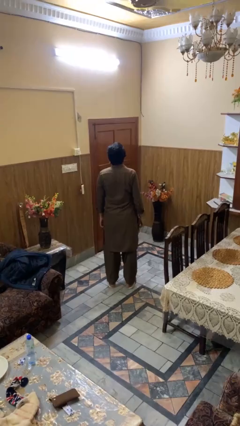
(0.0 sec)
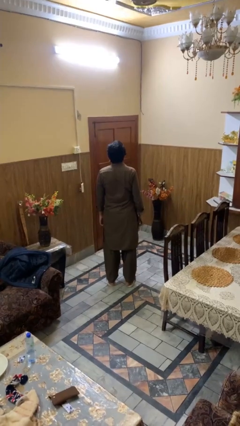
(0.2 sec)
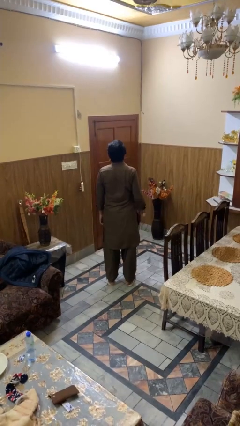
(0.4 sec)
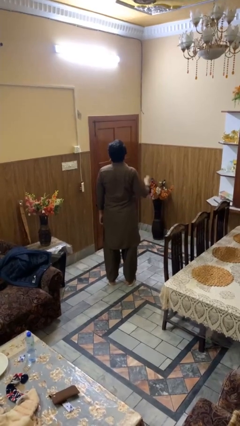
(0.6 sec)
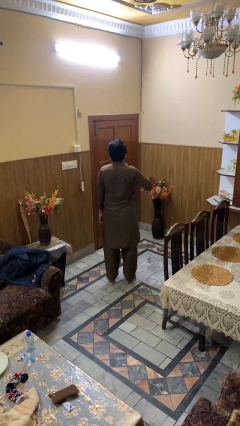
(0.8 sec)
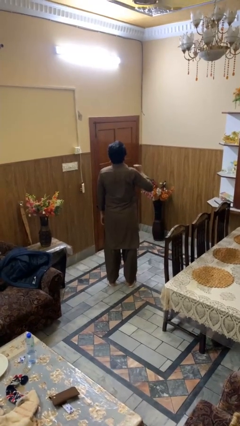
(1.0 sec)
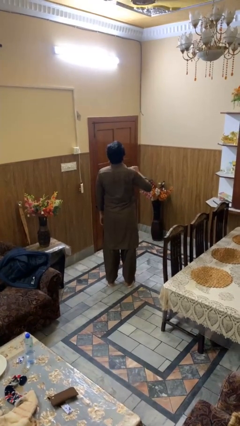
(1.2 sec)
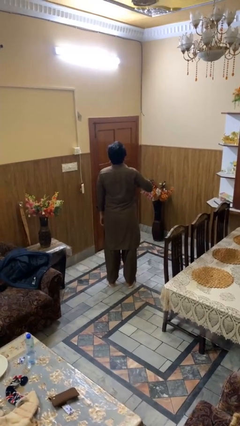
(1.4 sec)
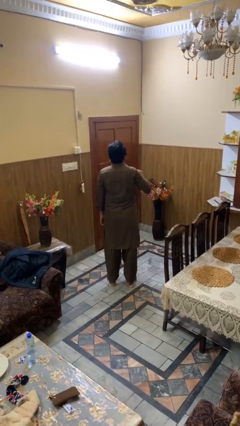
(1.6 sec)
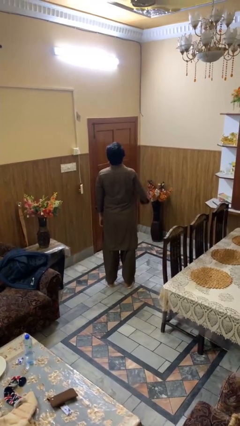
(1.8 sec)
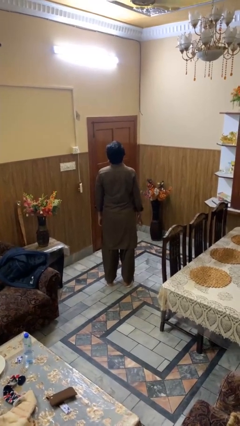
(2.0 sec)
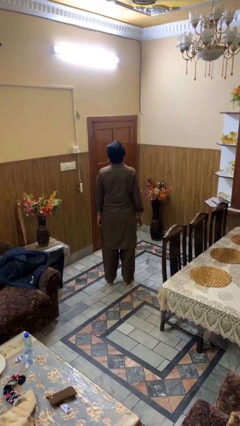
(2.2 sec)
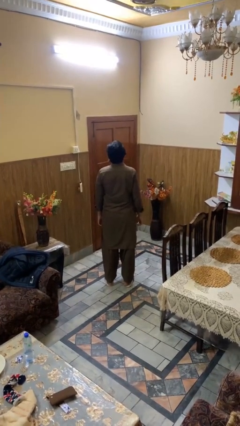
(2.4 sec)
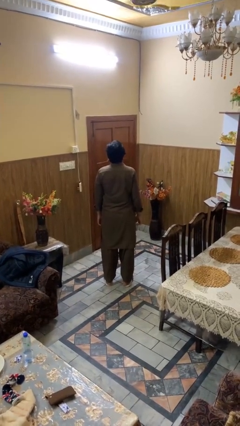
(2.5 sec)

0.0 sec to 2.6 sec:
person drums on chest

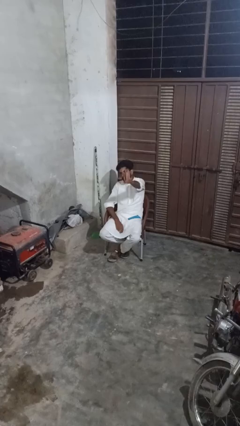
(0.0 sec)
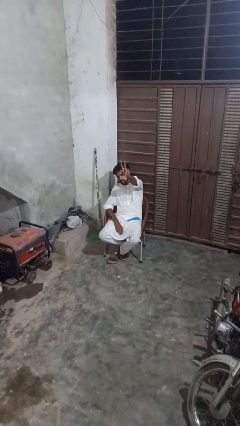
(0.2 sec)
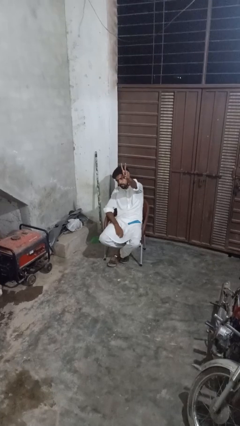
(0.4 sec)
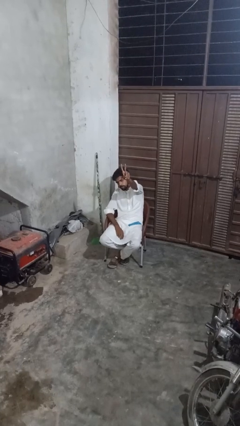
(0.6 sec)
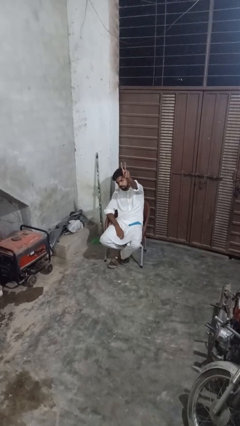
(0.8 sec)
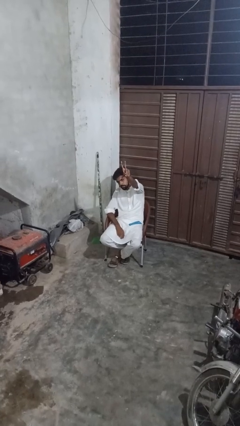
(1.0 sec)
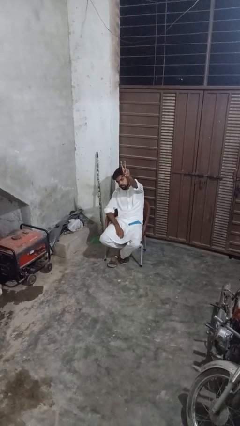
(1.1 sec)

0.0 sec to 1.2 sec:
person gestures peace

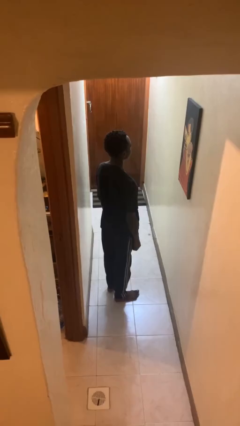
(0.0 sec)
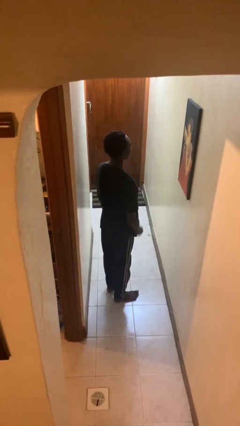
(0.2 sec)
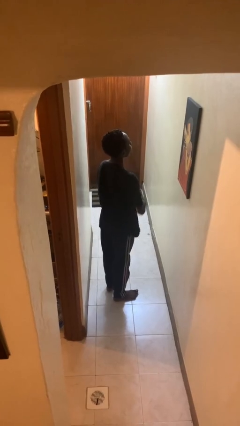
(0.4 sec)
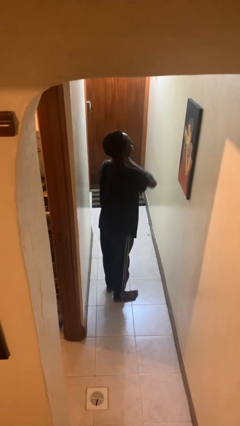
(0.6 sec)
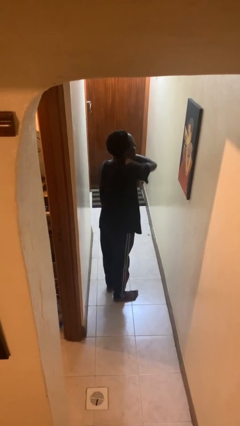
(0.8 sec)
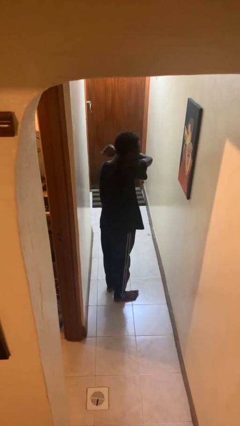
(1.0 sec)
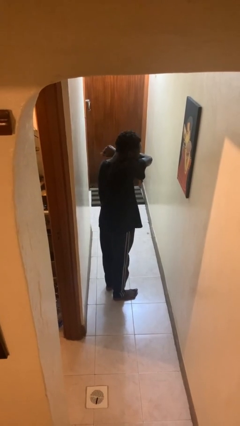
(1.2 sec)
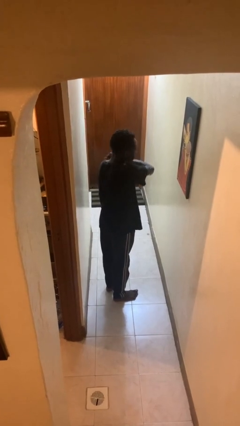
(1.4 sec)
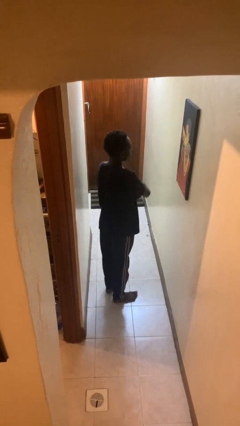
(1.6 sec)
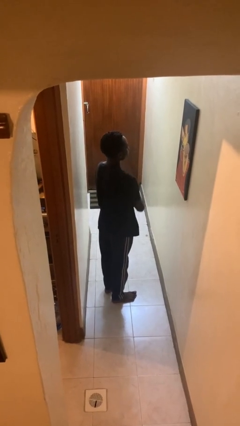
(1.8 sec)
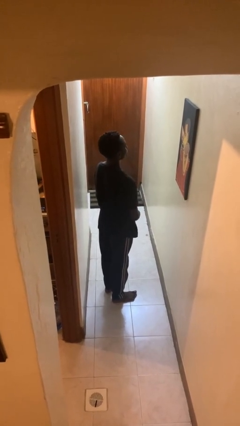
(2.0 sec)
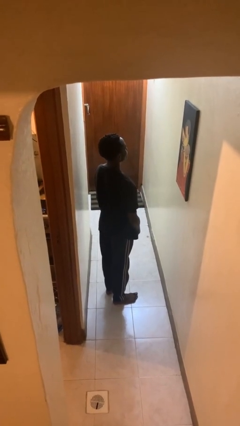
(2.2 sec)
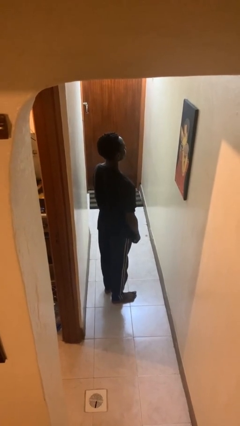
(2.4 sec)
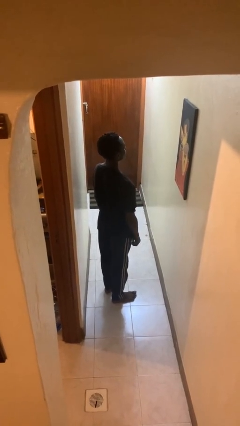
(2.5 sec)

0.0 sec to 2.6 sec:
person sneezes into arm

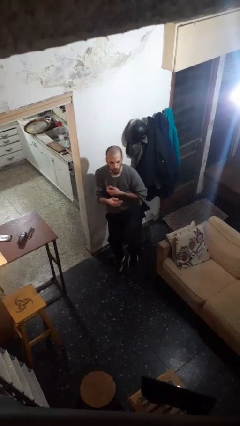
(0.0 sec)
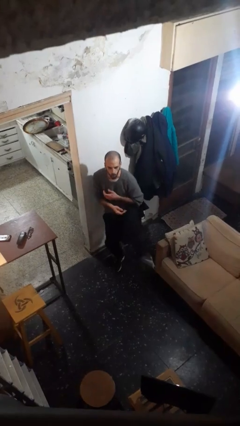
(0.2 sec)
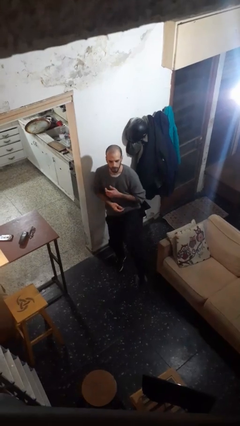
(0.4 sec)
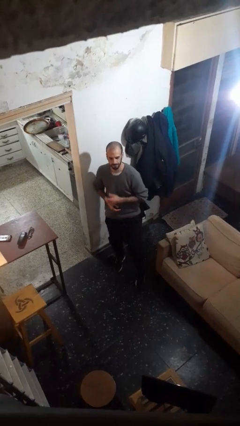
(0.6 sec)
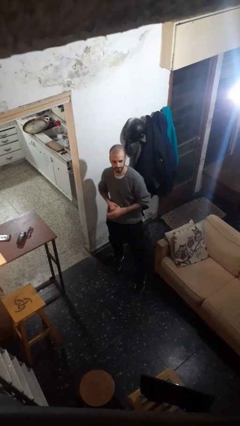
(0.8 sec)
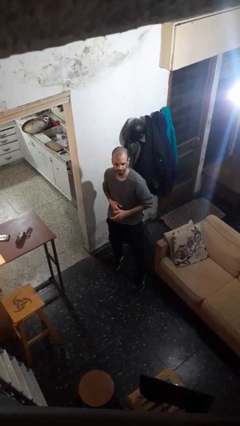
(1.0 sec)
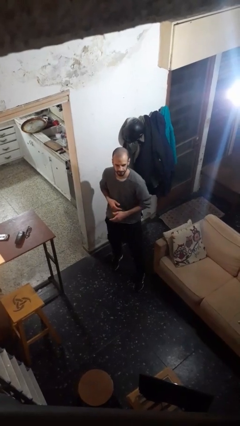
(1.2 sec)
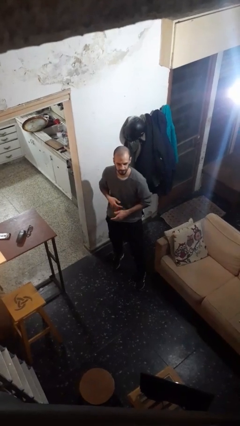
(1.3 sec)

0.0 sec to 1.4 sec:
person karate kicks

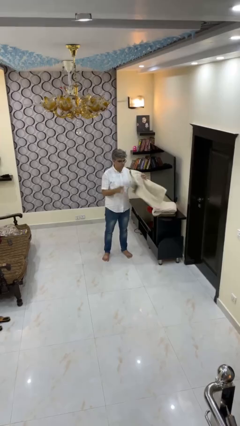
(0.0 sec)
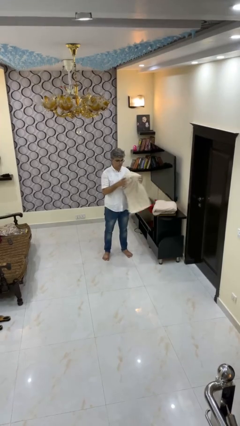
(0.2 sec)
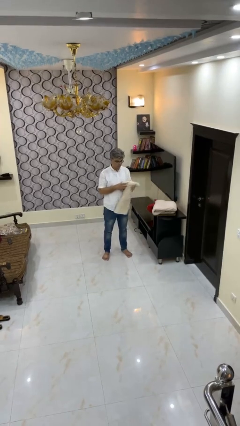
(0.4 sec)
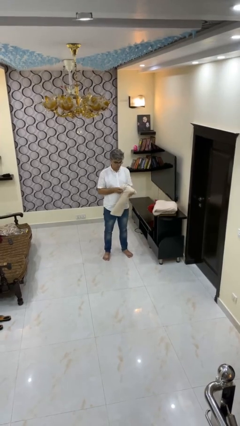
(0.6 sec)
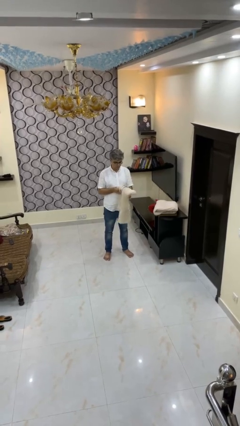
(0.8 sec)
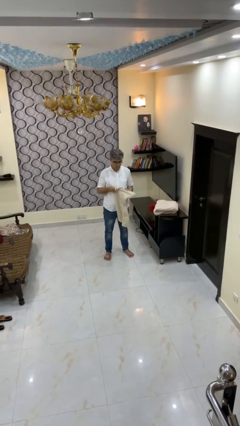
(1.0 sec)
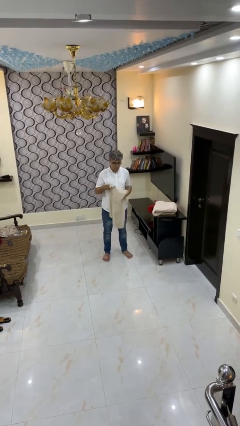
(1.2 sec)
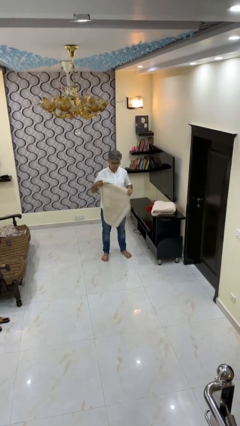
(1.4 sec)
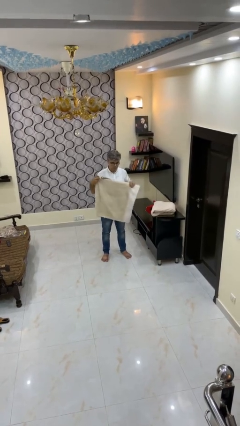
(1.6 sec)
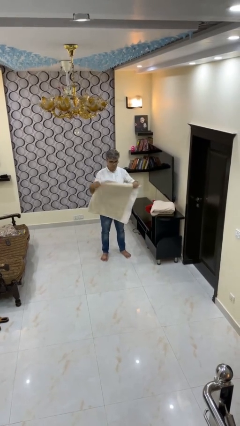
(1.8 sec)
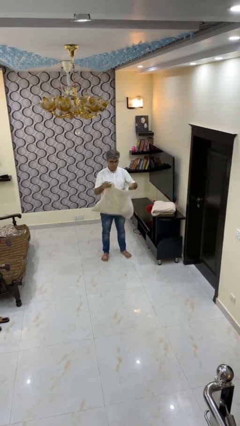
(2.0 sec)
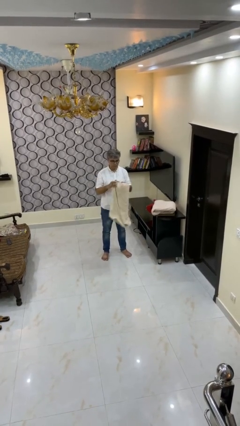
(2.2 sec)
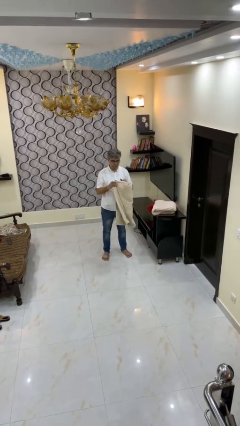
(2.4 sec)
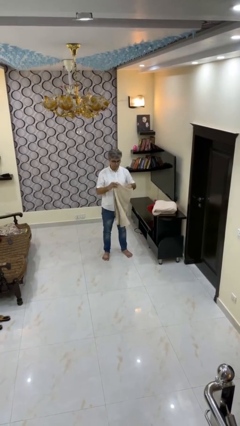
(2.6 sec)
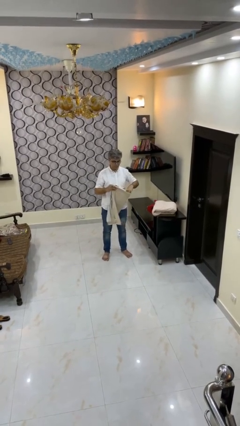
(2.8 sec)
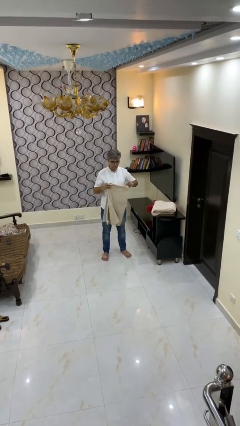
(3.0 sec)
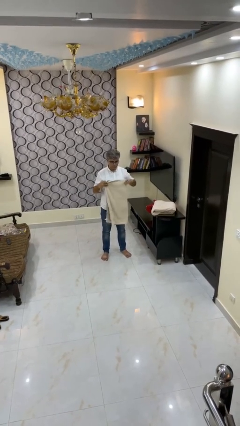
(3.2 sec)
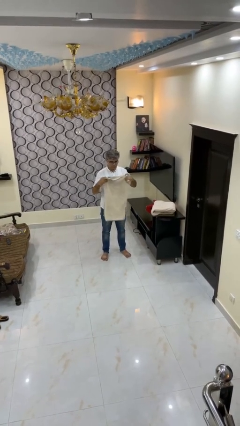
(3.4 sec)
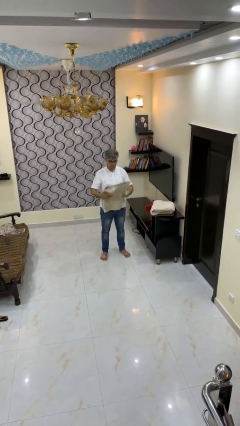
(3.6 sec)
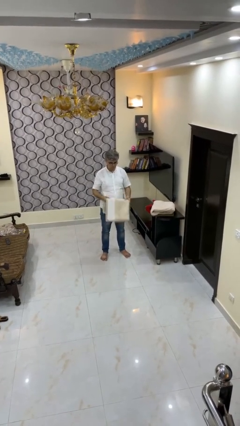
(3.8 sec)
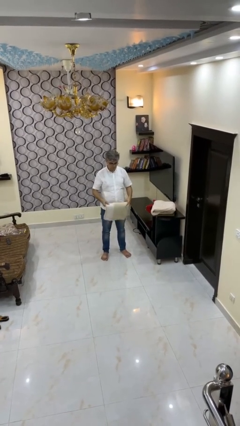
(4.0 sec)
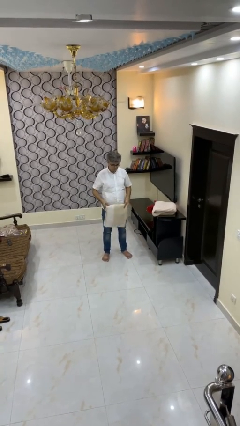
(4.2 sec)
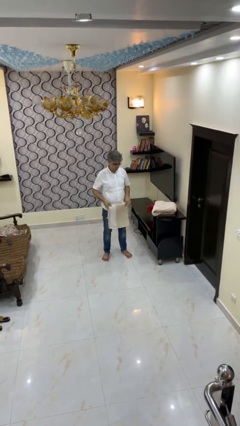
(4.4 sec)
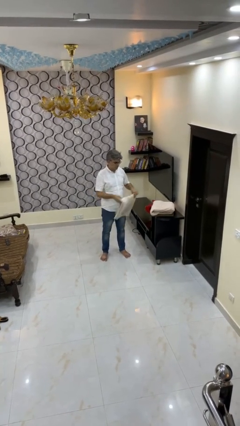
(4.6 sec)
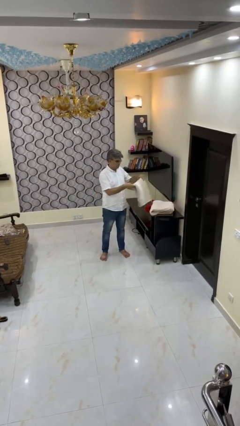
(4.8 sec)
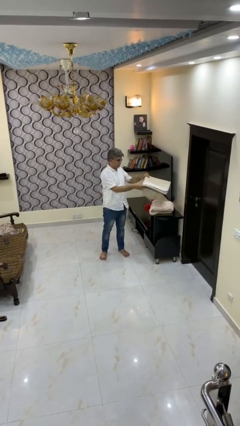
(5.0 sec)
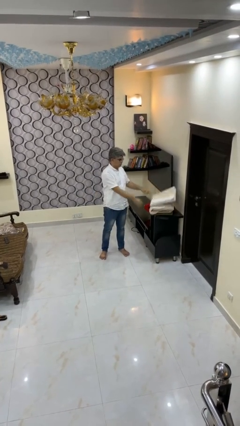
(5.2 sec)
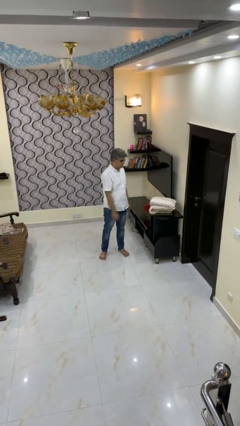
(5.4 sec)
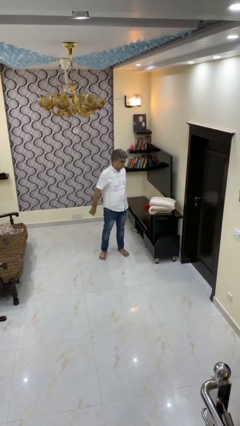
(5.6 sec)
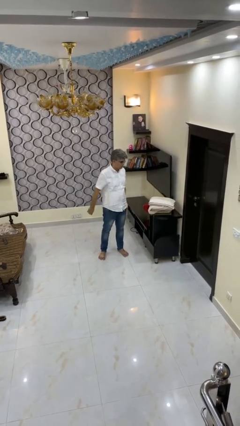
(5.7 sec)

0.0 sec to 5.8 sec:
person folds towel

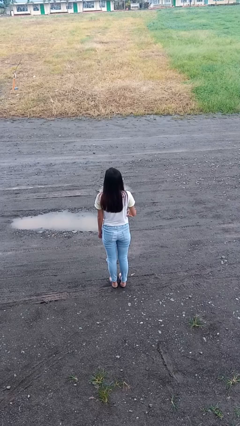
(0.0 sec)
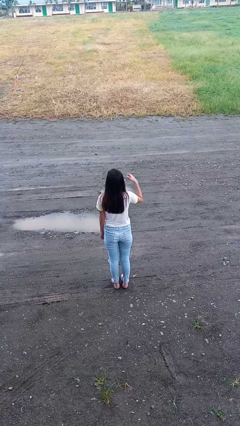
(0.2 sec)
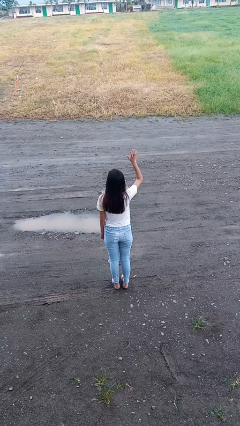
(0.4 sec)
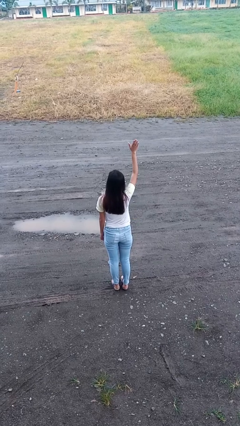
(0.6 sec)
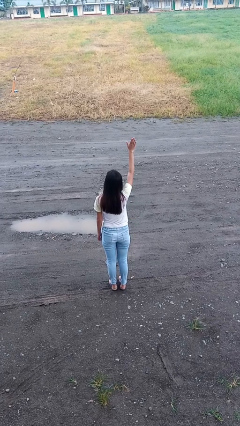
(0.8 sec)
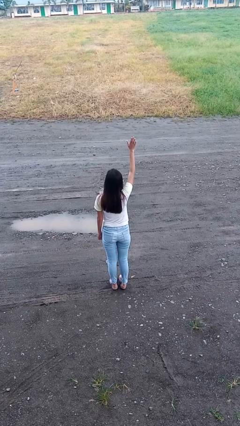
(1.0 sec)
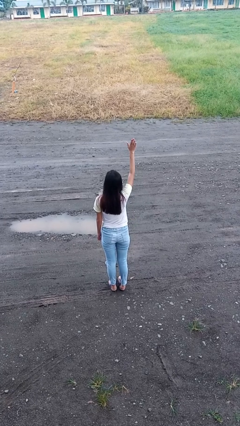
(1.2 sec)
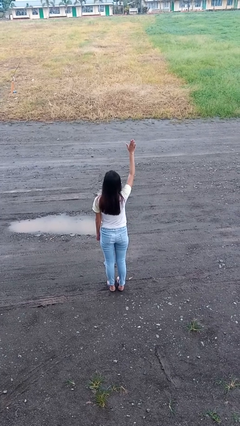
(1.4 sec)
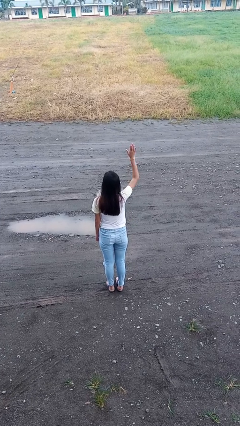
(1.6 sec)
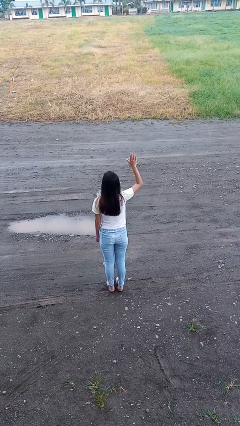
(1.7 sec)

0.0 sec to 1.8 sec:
person gestures raise hand

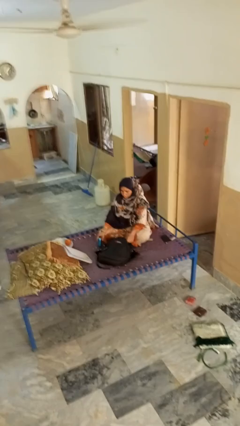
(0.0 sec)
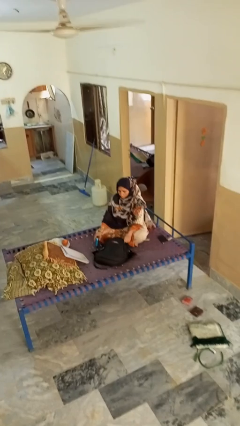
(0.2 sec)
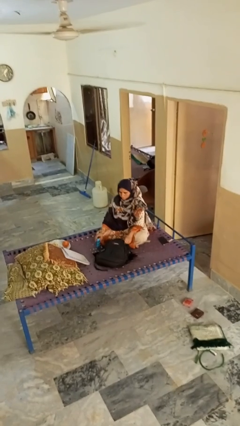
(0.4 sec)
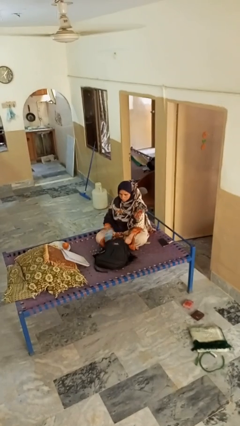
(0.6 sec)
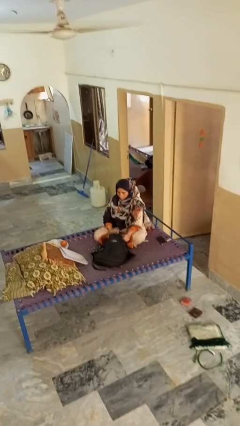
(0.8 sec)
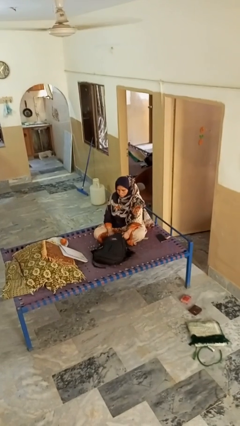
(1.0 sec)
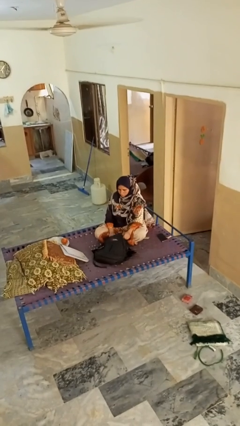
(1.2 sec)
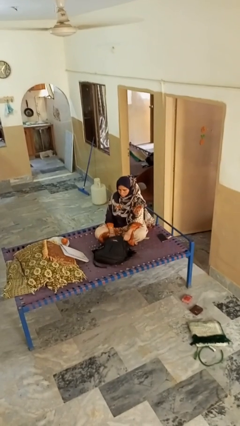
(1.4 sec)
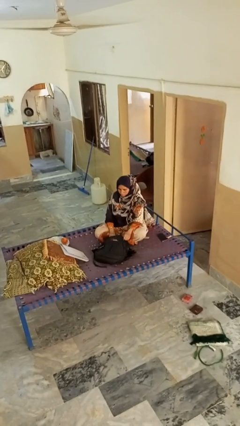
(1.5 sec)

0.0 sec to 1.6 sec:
person puts object into bag

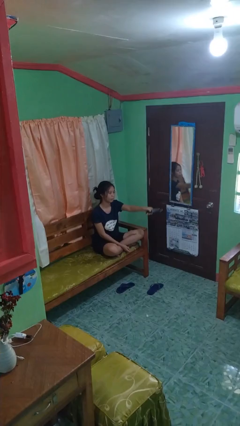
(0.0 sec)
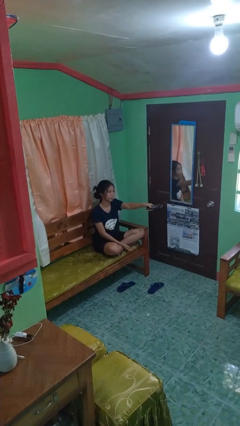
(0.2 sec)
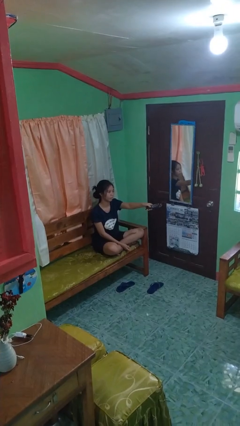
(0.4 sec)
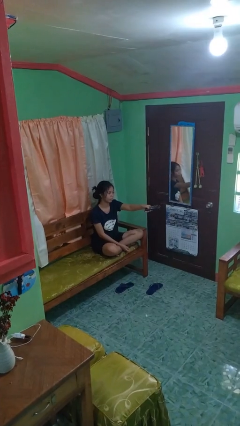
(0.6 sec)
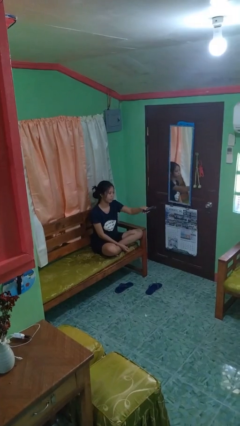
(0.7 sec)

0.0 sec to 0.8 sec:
person uses television remote
